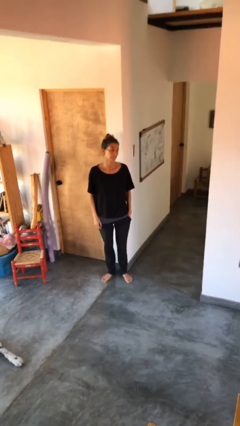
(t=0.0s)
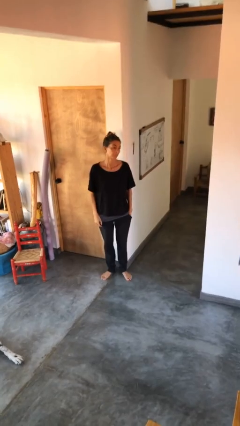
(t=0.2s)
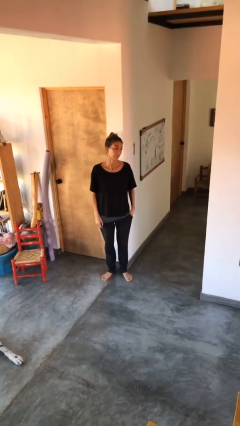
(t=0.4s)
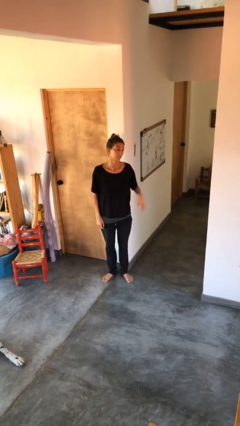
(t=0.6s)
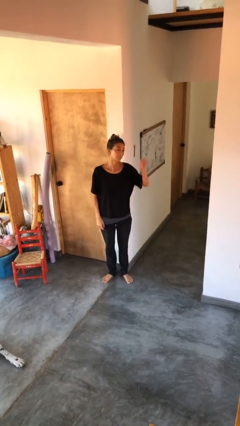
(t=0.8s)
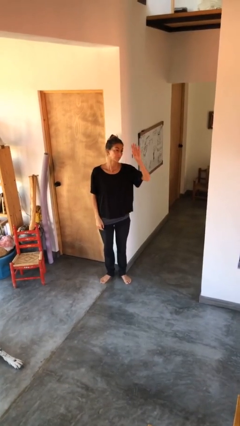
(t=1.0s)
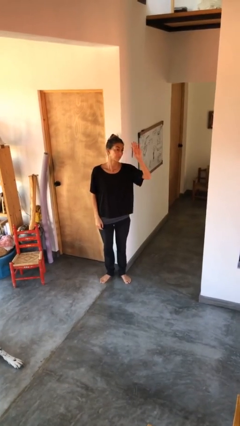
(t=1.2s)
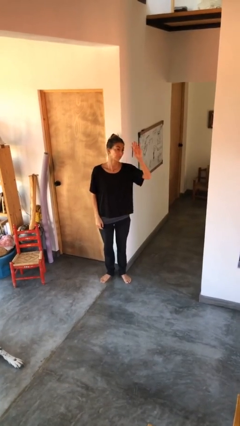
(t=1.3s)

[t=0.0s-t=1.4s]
person gestures raise hand

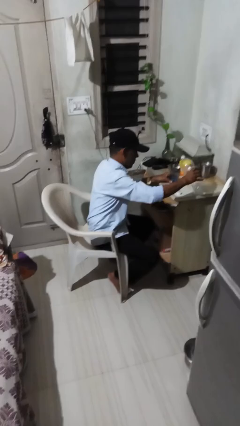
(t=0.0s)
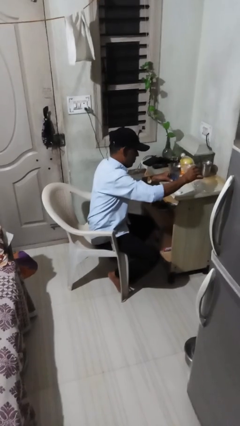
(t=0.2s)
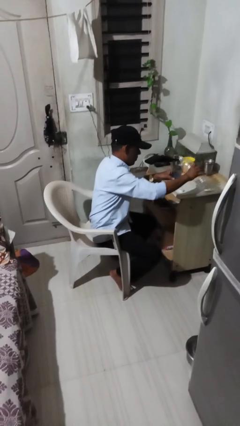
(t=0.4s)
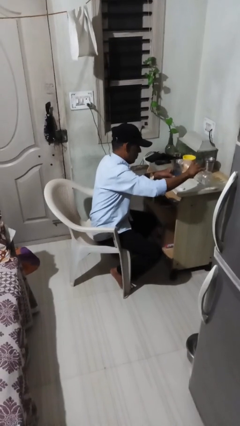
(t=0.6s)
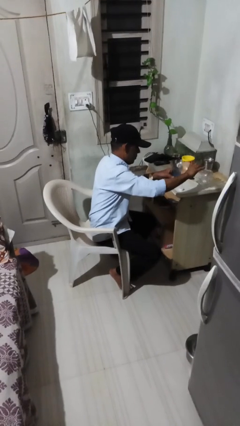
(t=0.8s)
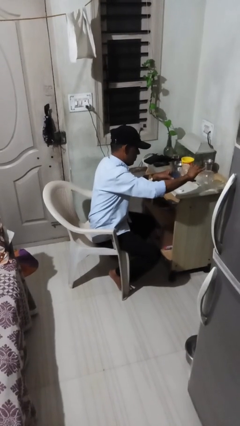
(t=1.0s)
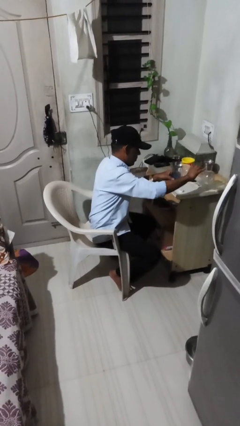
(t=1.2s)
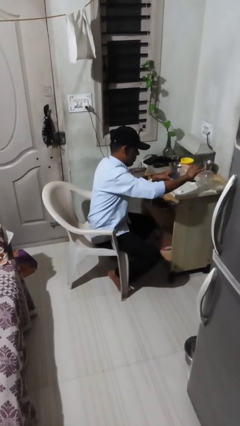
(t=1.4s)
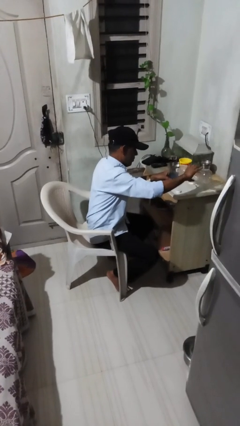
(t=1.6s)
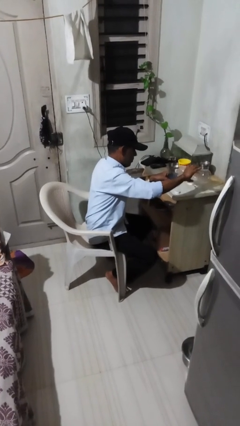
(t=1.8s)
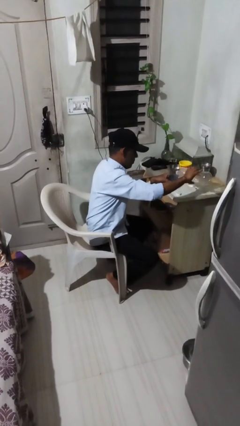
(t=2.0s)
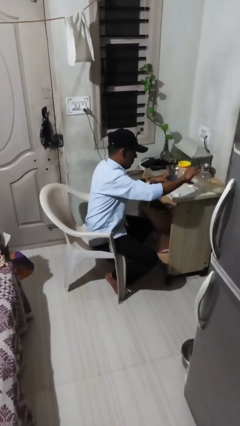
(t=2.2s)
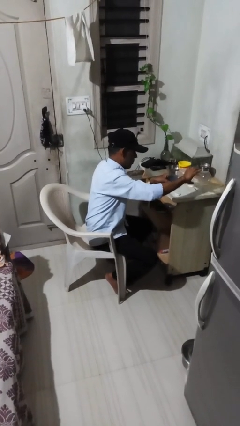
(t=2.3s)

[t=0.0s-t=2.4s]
person pours liquid into cup

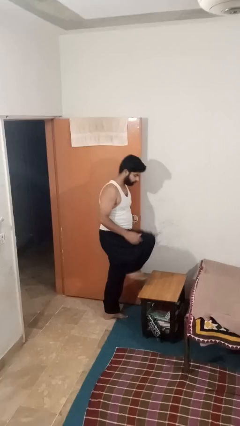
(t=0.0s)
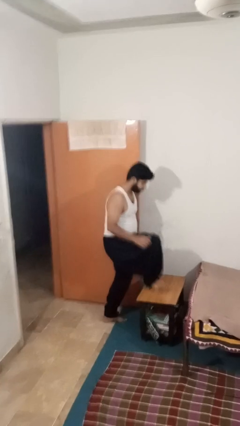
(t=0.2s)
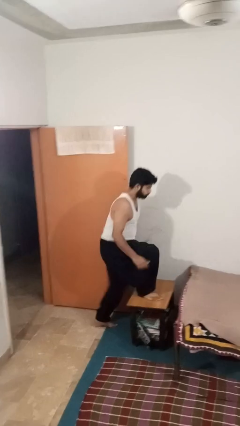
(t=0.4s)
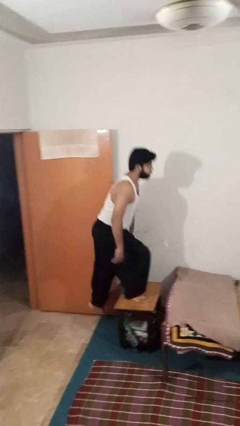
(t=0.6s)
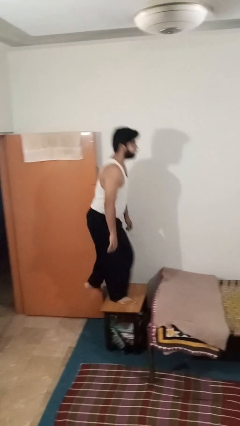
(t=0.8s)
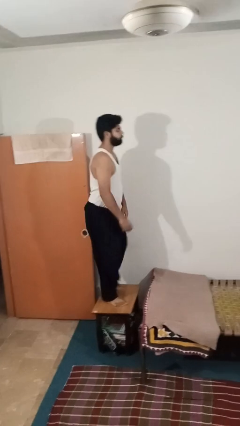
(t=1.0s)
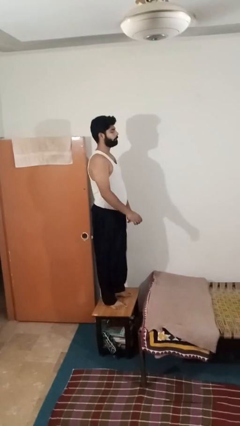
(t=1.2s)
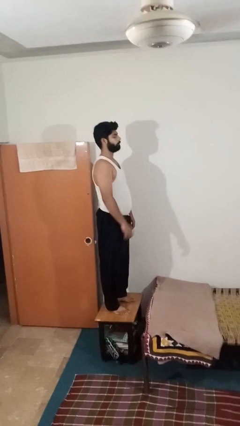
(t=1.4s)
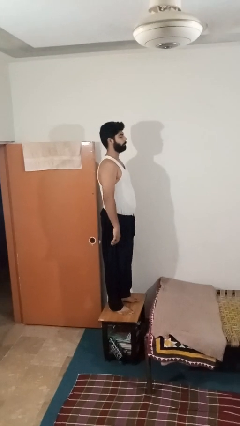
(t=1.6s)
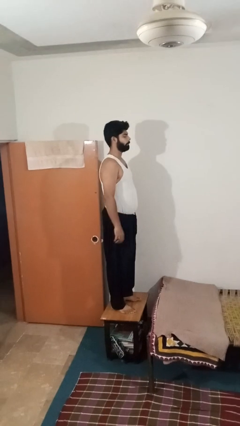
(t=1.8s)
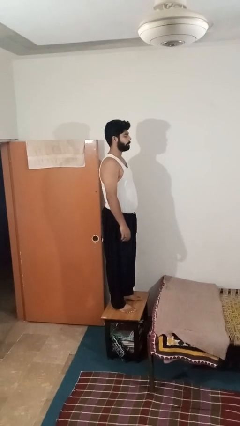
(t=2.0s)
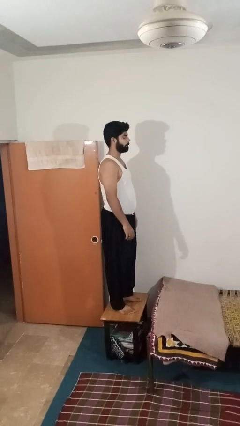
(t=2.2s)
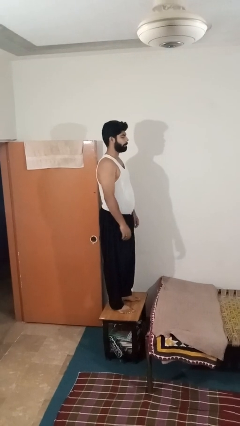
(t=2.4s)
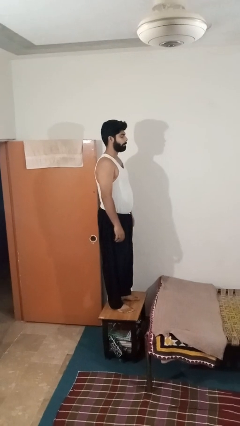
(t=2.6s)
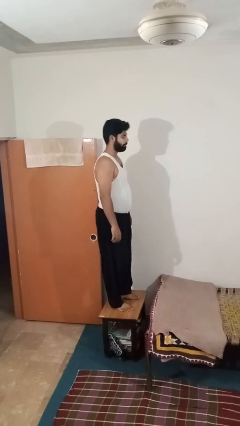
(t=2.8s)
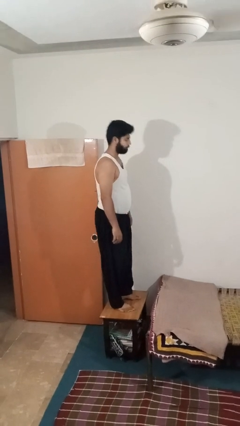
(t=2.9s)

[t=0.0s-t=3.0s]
person climbs on table

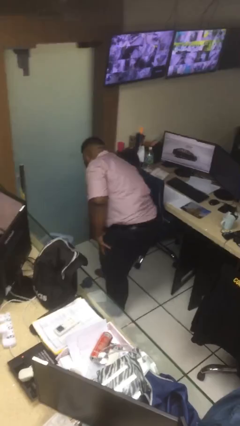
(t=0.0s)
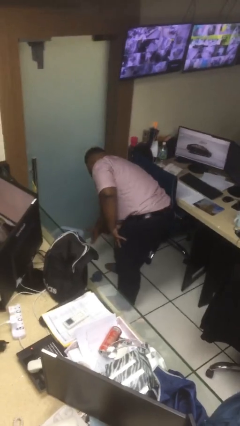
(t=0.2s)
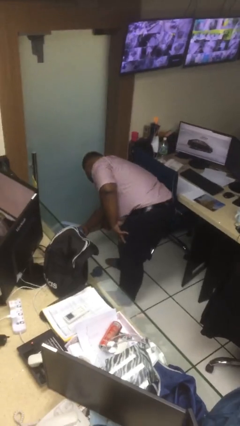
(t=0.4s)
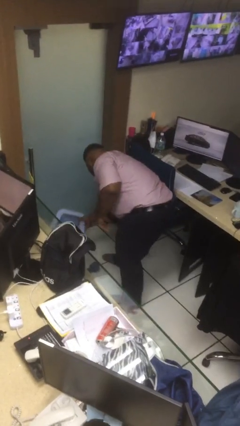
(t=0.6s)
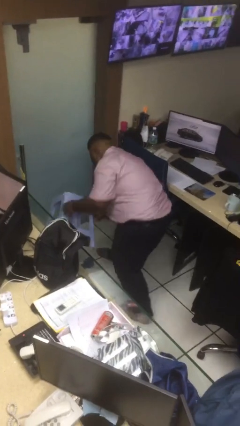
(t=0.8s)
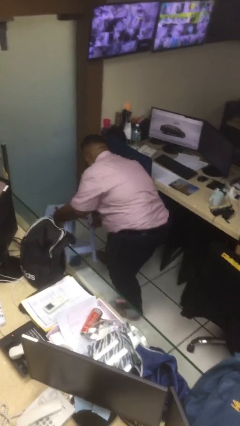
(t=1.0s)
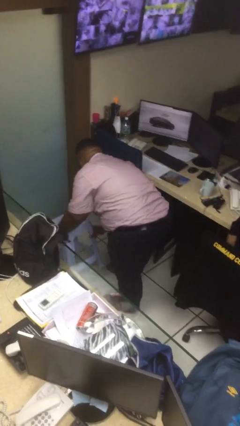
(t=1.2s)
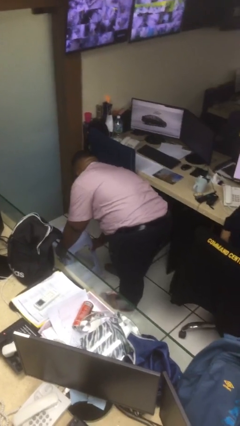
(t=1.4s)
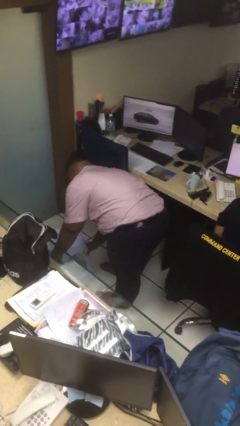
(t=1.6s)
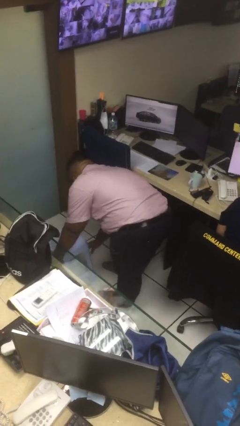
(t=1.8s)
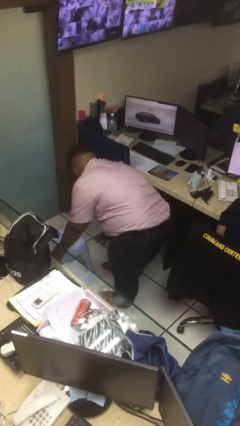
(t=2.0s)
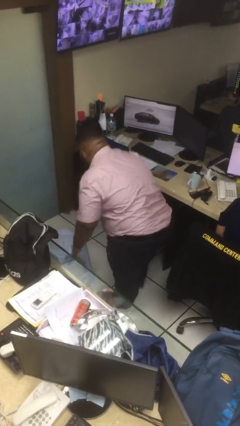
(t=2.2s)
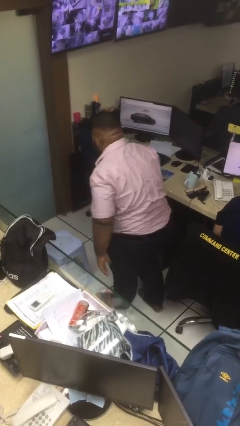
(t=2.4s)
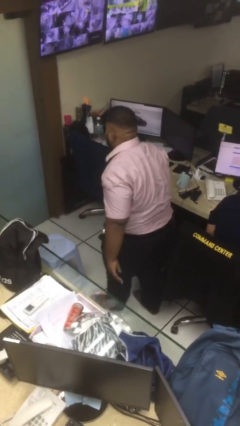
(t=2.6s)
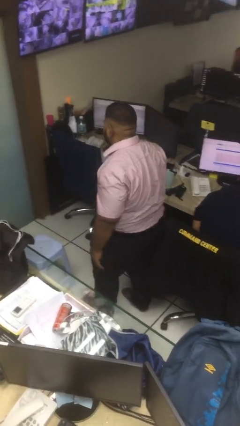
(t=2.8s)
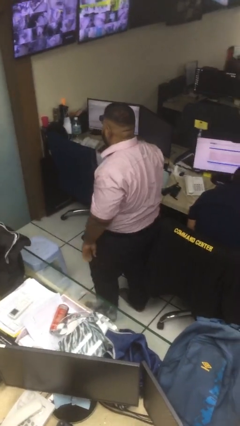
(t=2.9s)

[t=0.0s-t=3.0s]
person sets upright furniture

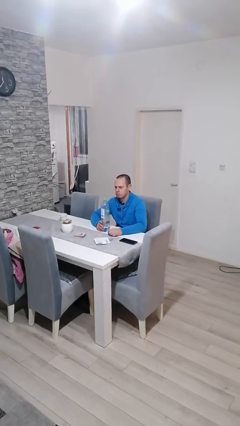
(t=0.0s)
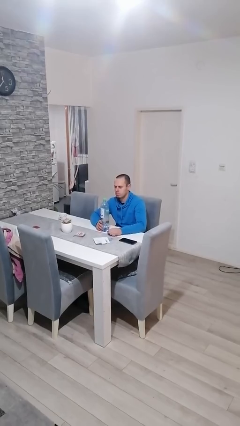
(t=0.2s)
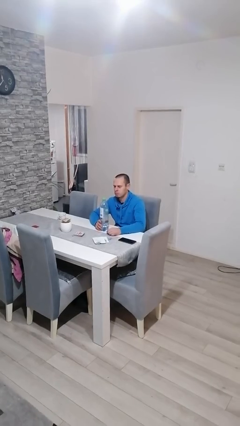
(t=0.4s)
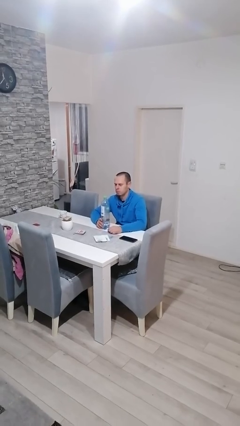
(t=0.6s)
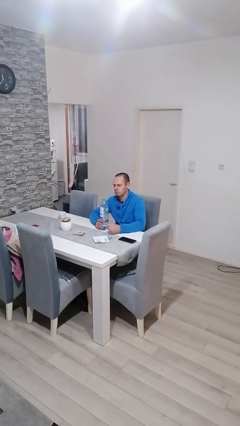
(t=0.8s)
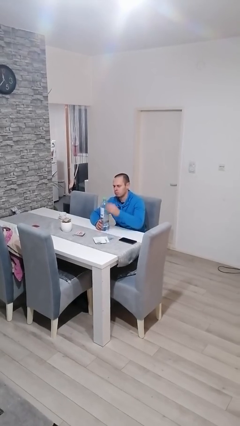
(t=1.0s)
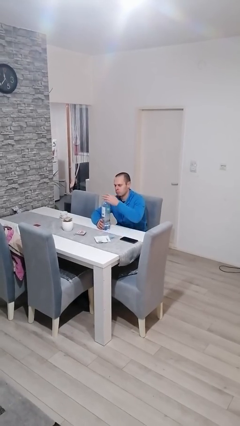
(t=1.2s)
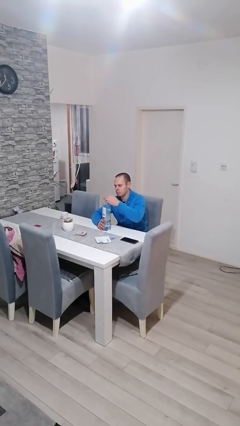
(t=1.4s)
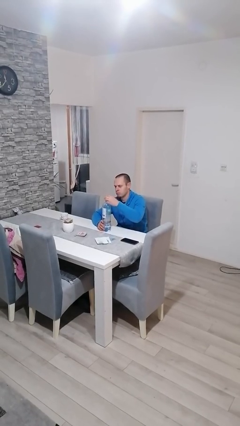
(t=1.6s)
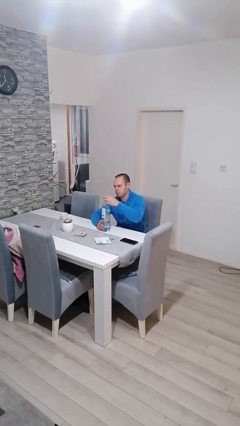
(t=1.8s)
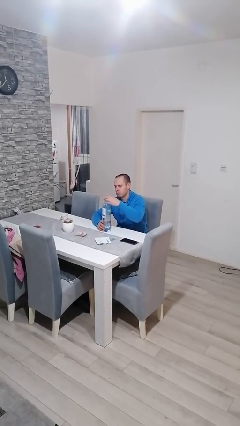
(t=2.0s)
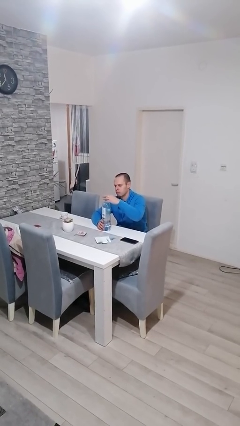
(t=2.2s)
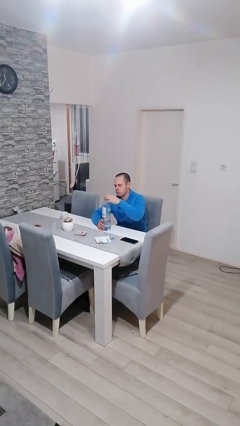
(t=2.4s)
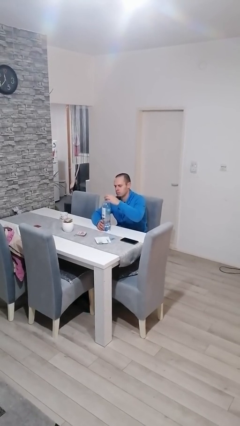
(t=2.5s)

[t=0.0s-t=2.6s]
person unscrews lid from bottle

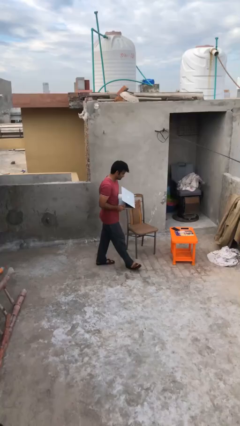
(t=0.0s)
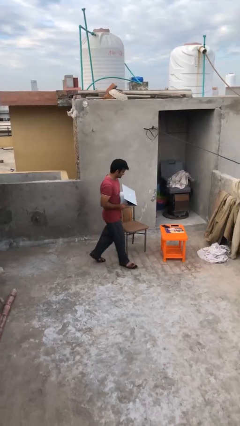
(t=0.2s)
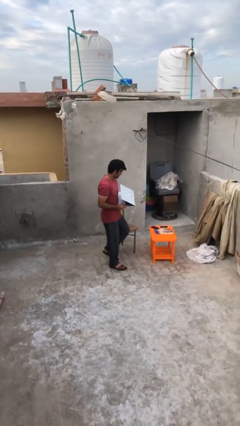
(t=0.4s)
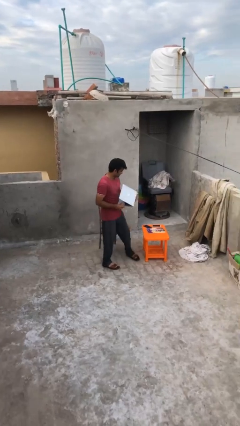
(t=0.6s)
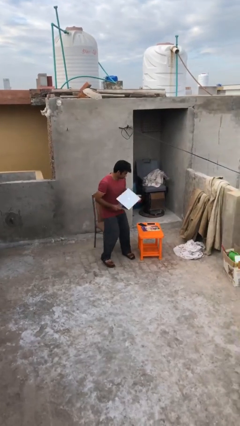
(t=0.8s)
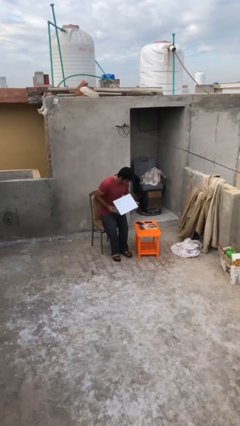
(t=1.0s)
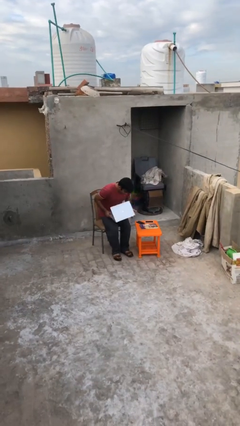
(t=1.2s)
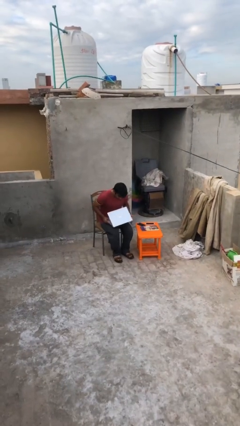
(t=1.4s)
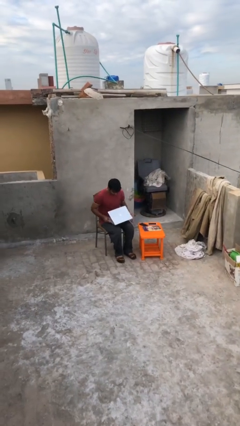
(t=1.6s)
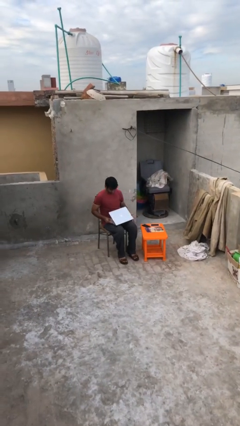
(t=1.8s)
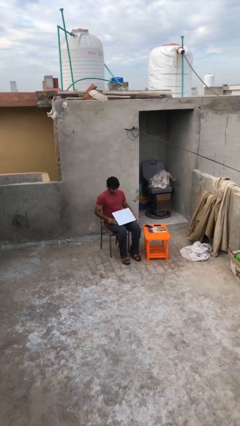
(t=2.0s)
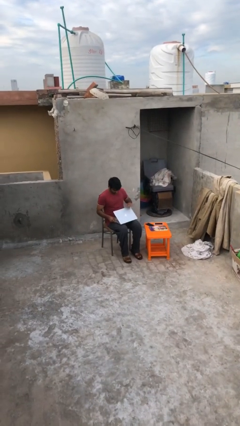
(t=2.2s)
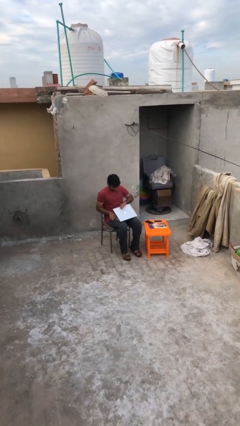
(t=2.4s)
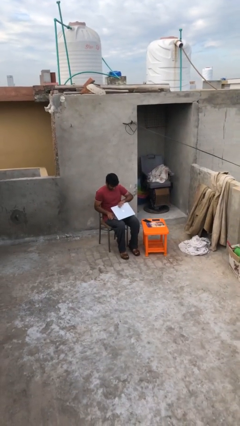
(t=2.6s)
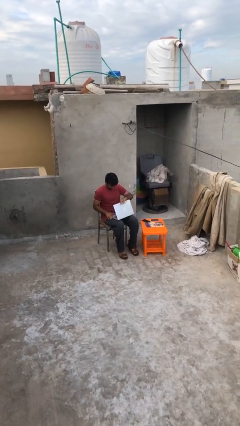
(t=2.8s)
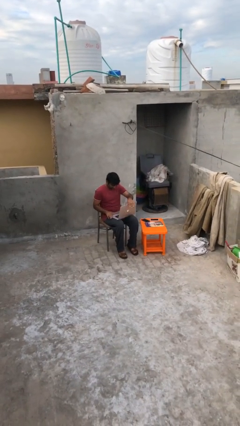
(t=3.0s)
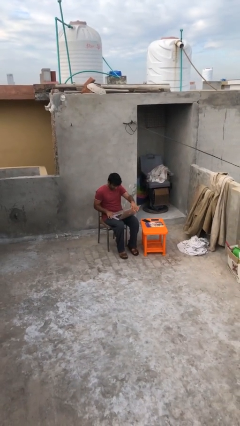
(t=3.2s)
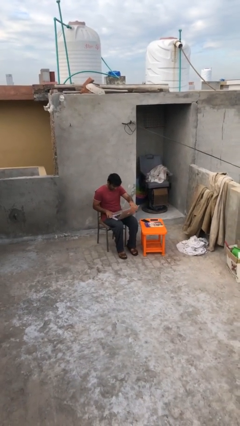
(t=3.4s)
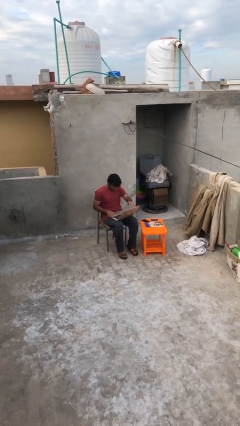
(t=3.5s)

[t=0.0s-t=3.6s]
person sits down

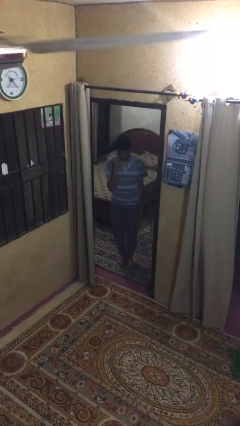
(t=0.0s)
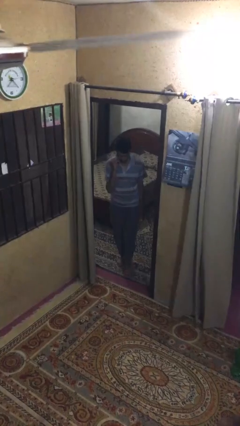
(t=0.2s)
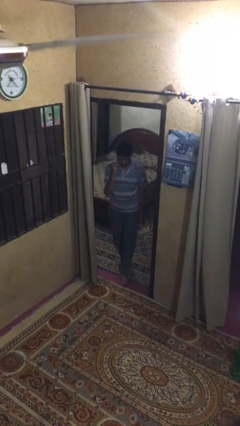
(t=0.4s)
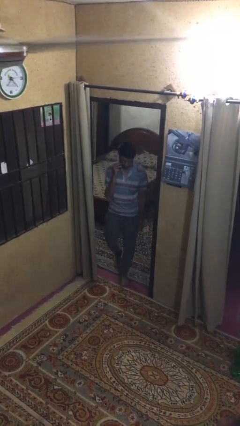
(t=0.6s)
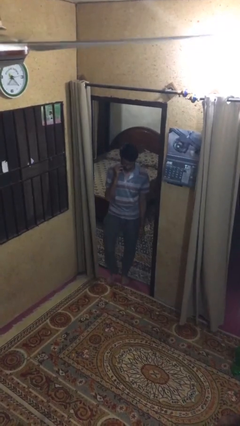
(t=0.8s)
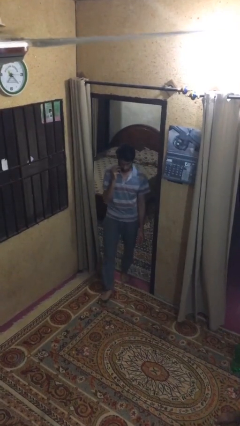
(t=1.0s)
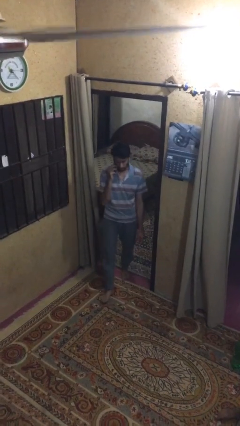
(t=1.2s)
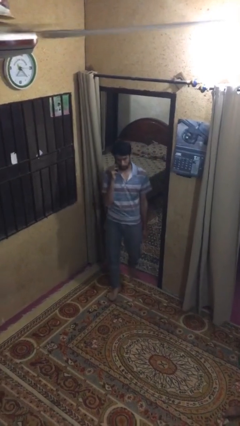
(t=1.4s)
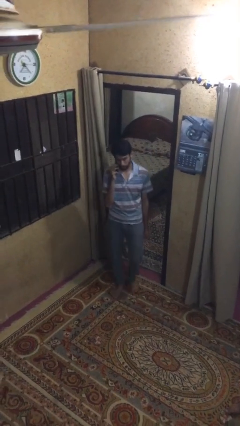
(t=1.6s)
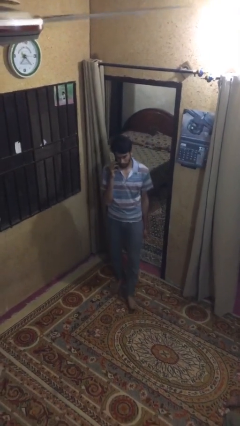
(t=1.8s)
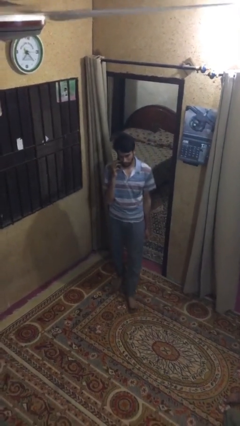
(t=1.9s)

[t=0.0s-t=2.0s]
person enters scene through structure
